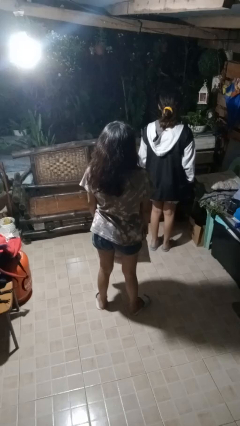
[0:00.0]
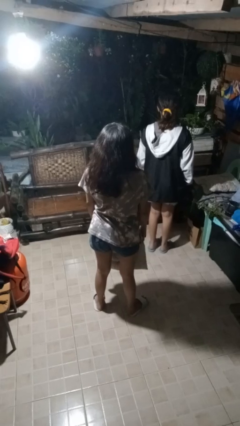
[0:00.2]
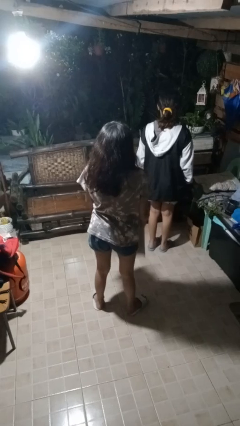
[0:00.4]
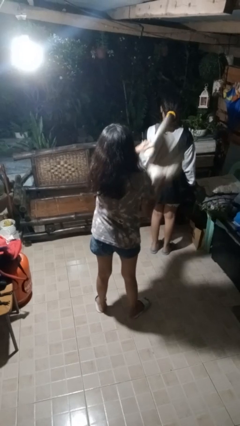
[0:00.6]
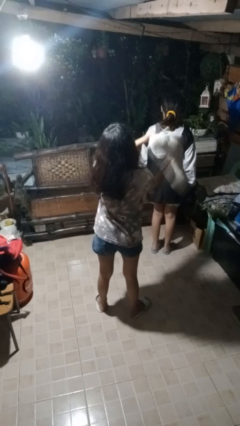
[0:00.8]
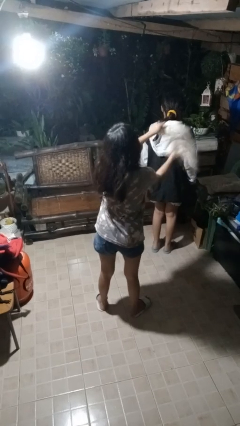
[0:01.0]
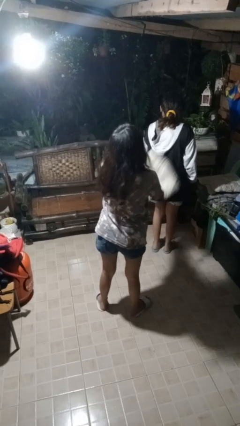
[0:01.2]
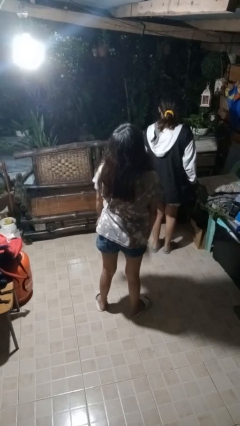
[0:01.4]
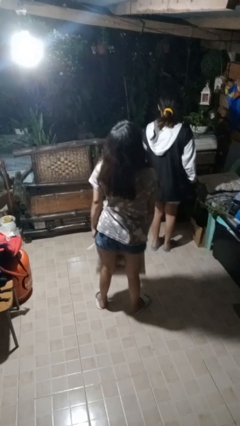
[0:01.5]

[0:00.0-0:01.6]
person hits person with pillow

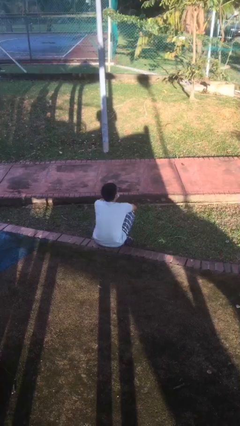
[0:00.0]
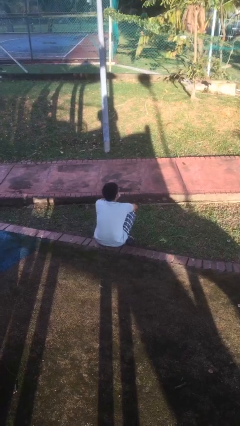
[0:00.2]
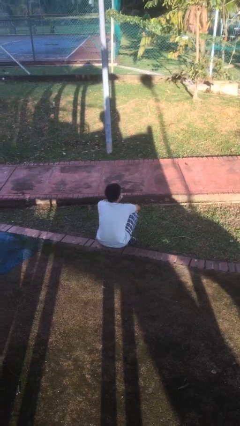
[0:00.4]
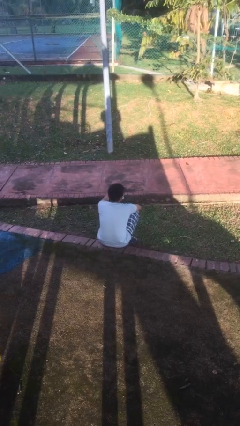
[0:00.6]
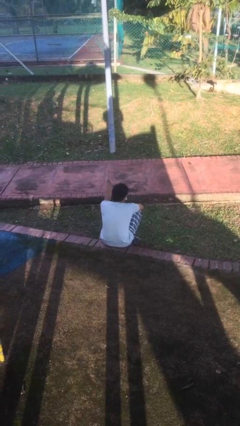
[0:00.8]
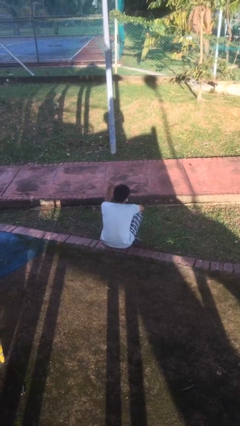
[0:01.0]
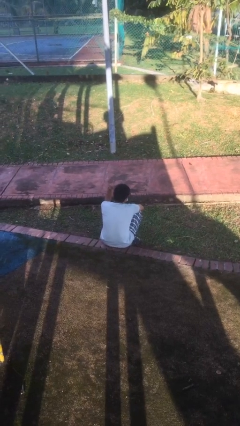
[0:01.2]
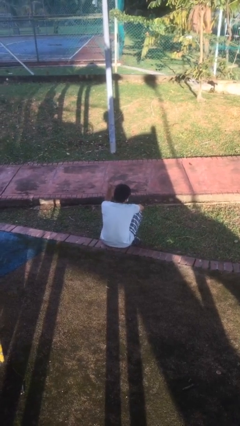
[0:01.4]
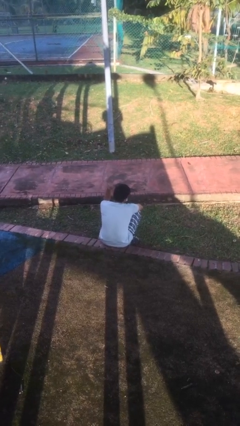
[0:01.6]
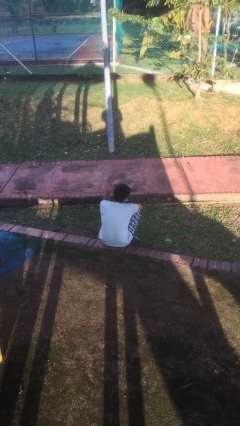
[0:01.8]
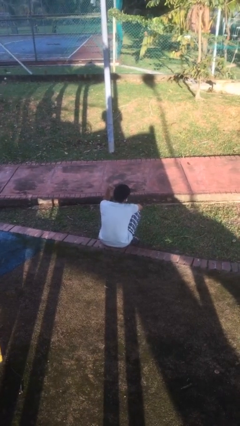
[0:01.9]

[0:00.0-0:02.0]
person gestures listen closely

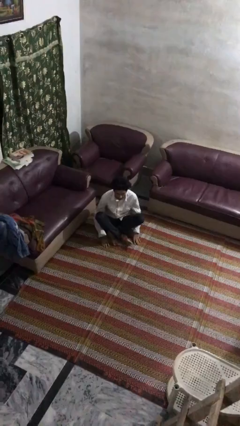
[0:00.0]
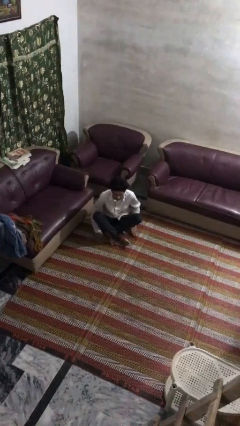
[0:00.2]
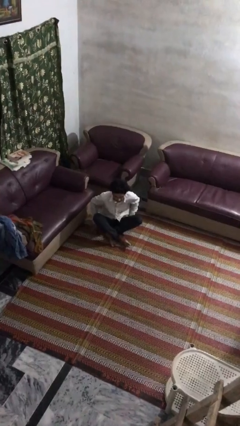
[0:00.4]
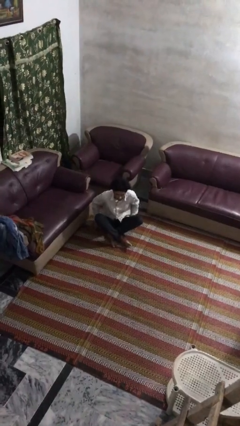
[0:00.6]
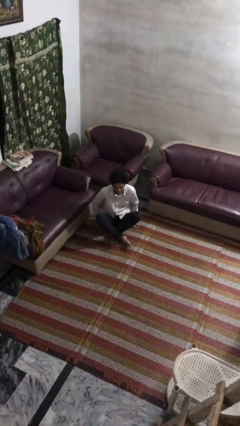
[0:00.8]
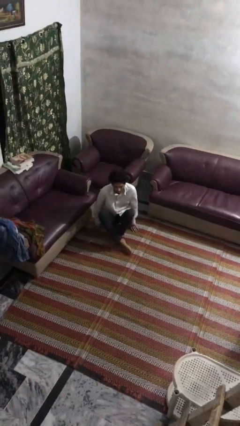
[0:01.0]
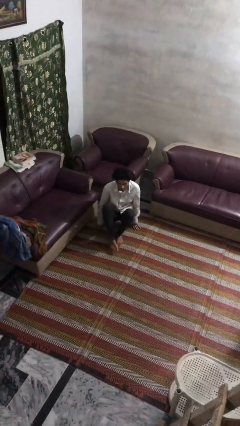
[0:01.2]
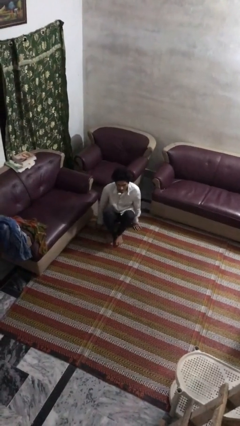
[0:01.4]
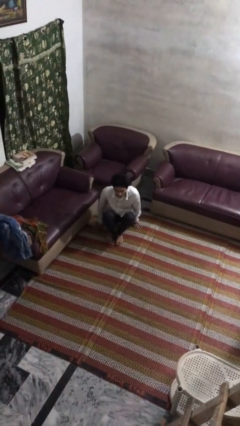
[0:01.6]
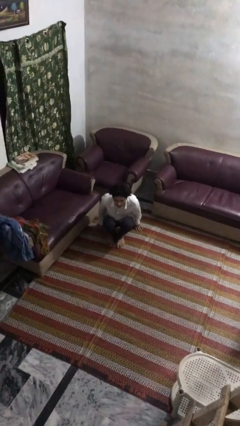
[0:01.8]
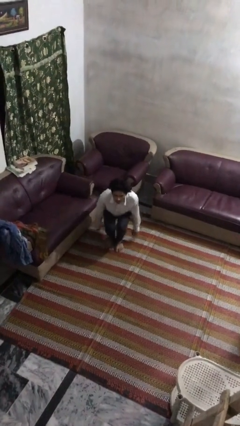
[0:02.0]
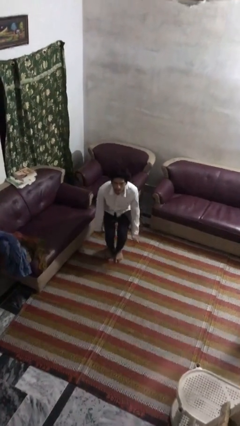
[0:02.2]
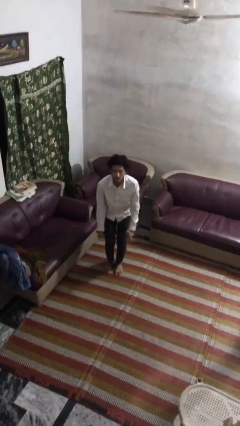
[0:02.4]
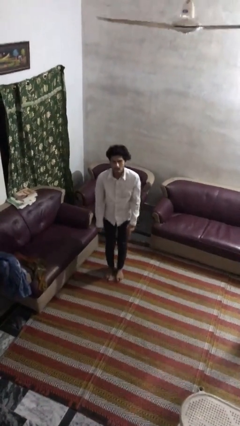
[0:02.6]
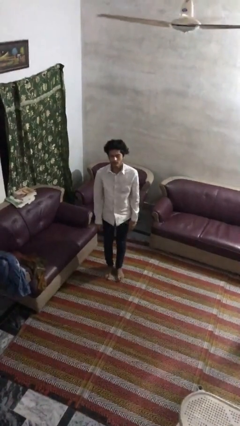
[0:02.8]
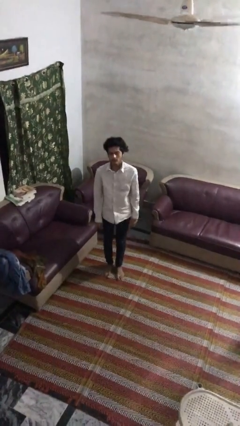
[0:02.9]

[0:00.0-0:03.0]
person stands up from floor

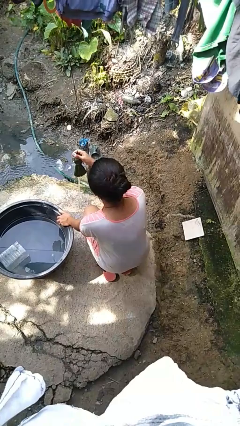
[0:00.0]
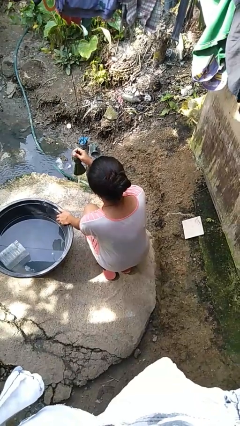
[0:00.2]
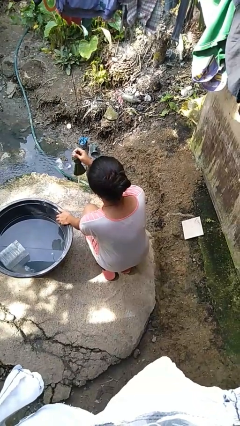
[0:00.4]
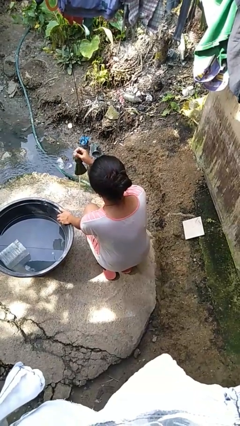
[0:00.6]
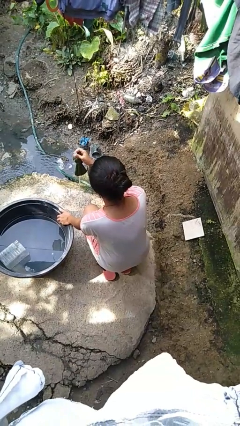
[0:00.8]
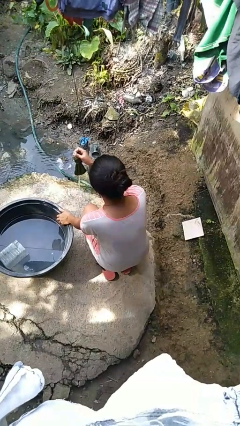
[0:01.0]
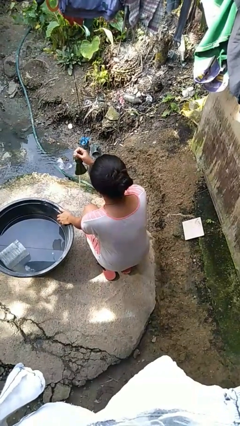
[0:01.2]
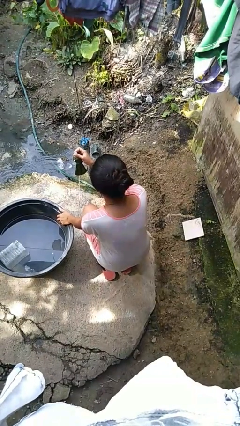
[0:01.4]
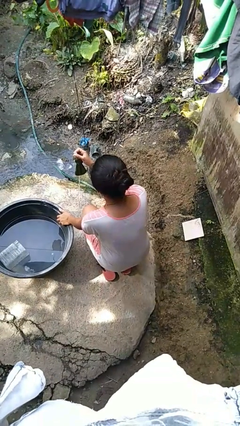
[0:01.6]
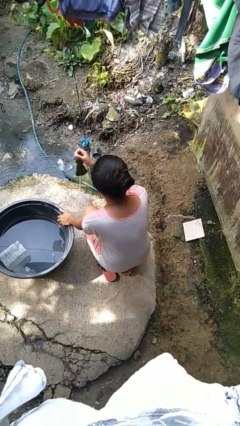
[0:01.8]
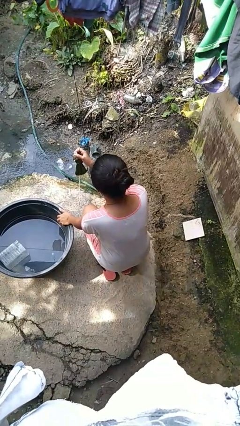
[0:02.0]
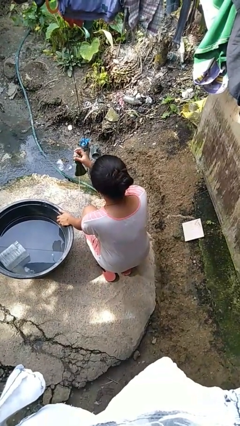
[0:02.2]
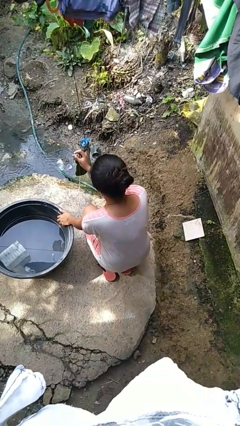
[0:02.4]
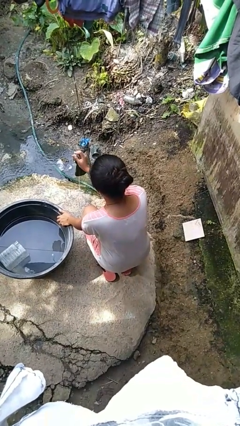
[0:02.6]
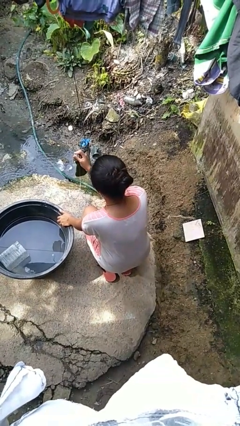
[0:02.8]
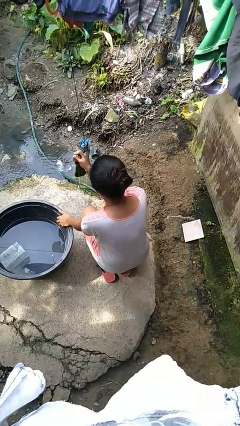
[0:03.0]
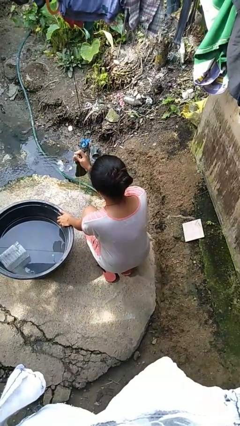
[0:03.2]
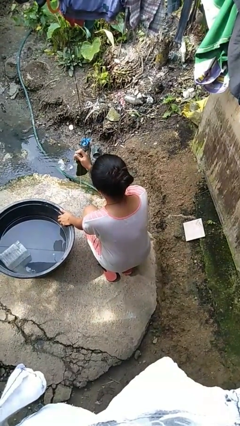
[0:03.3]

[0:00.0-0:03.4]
person turns off faucet

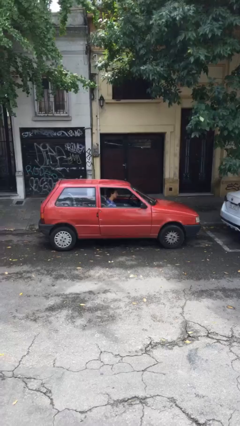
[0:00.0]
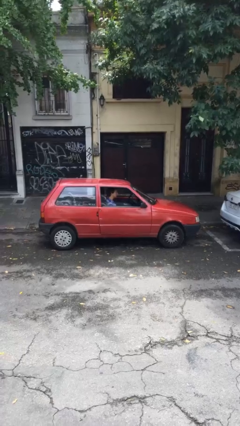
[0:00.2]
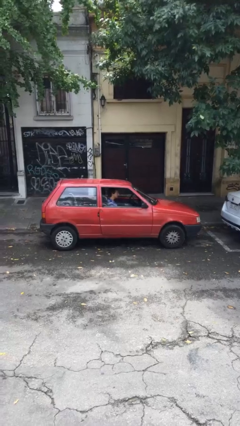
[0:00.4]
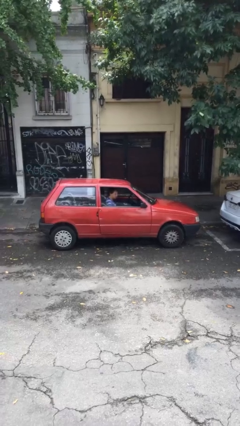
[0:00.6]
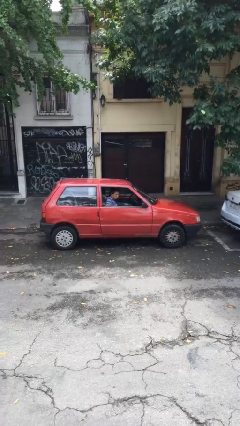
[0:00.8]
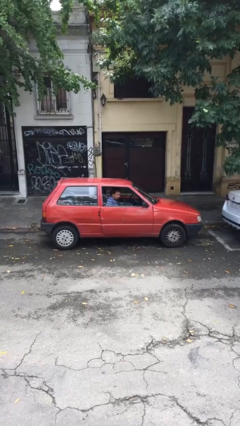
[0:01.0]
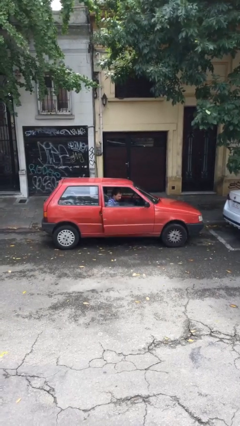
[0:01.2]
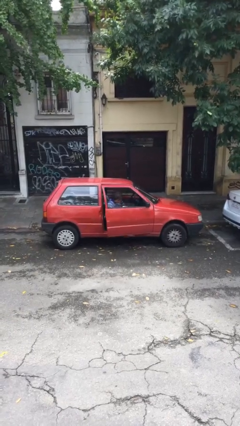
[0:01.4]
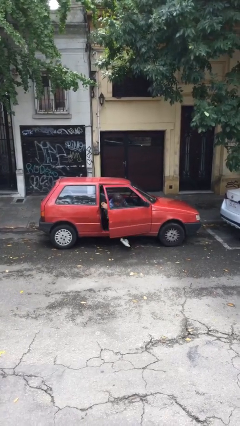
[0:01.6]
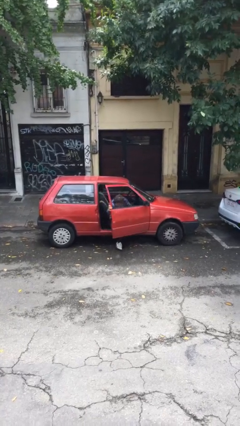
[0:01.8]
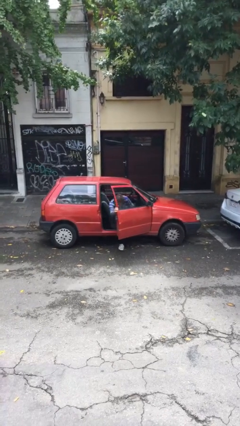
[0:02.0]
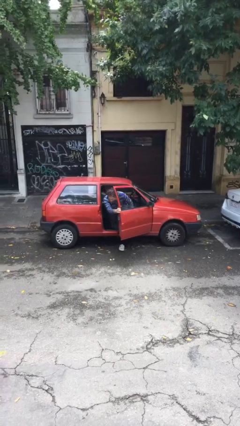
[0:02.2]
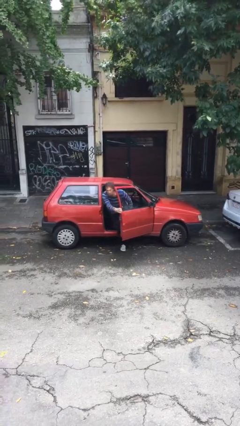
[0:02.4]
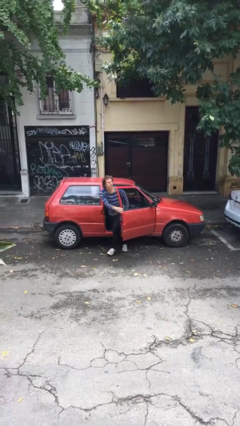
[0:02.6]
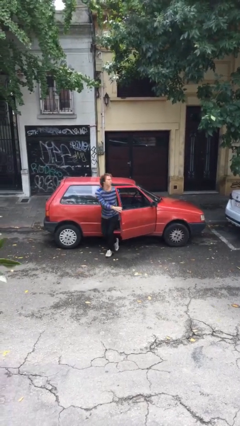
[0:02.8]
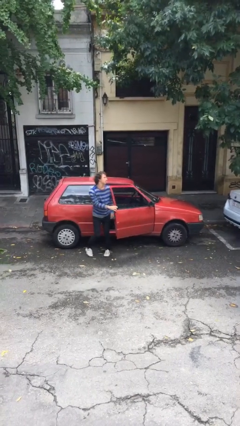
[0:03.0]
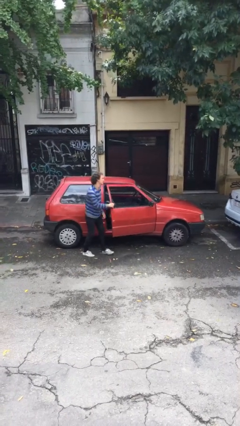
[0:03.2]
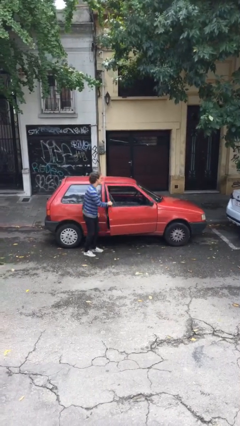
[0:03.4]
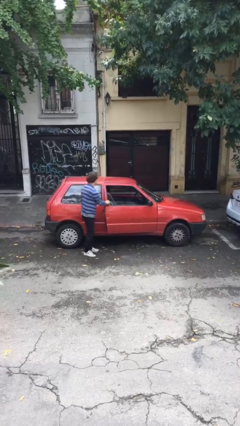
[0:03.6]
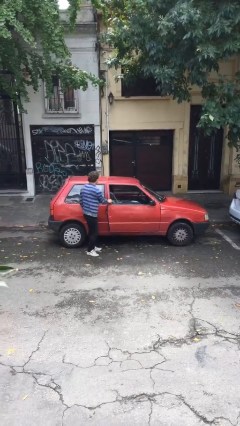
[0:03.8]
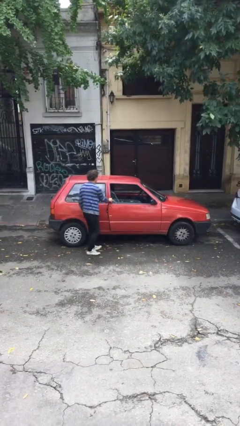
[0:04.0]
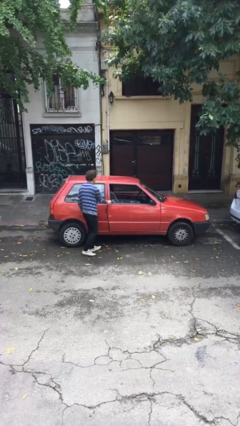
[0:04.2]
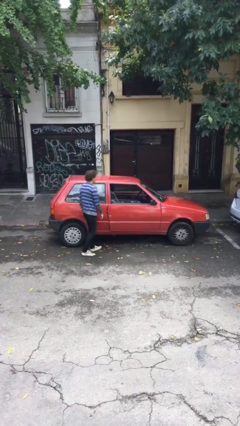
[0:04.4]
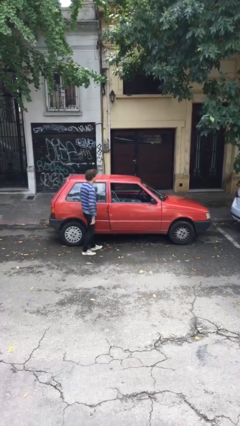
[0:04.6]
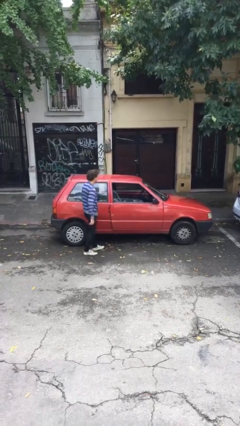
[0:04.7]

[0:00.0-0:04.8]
car drops off person

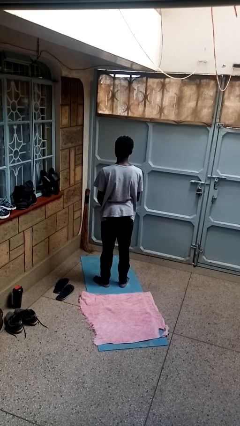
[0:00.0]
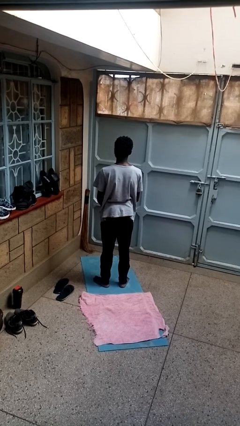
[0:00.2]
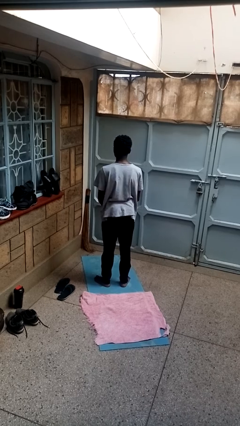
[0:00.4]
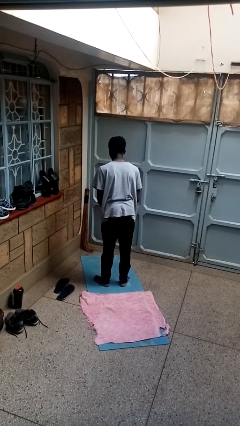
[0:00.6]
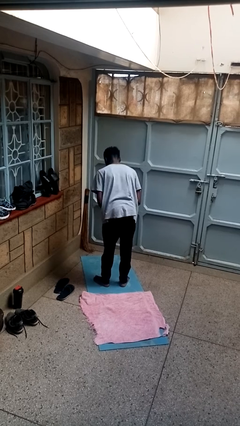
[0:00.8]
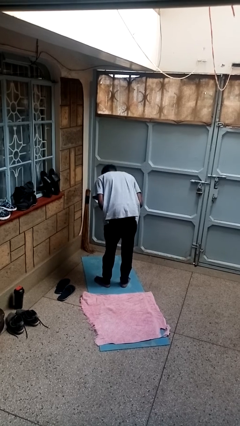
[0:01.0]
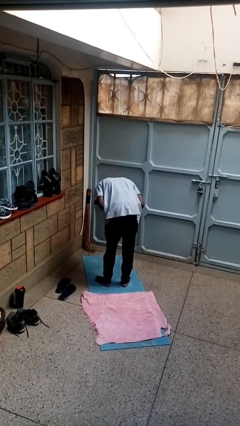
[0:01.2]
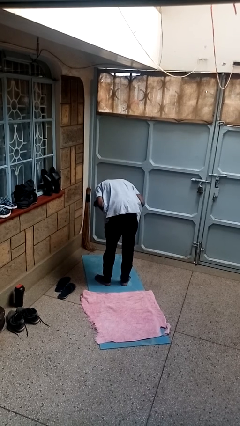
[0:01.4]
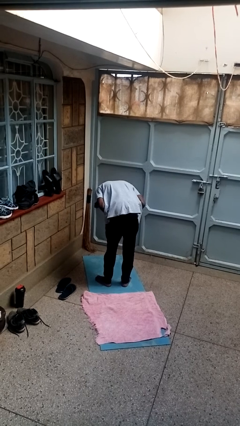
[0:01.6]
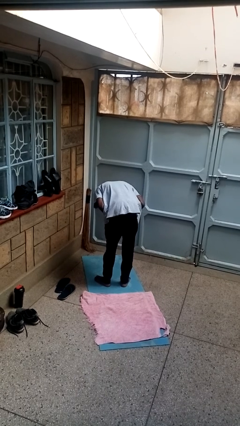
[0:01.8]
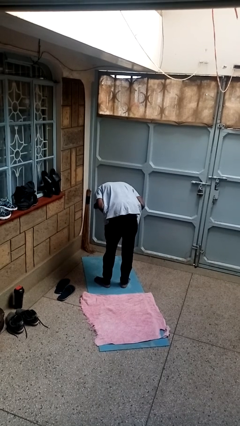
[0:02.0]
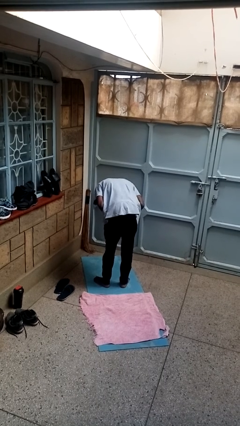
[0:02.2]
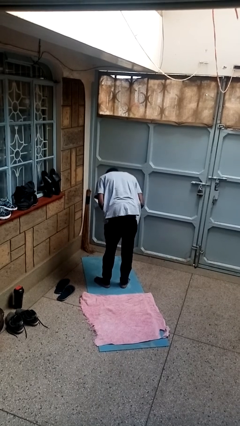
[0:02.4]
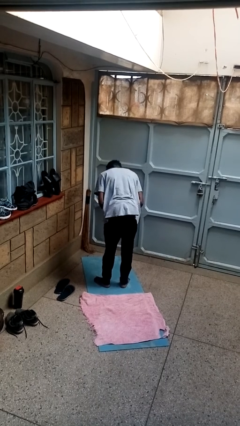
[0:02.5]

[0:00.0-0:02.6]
person bows
